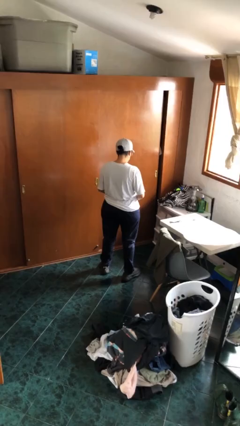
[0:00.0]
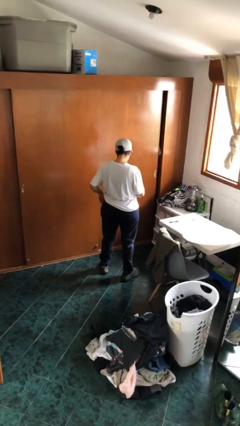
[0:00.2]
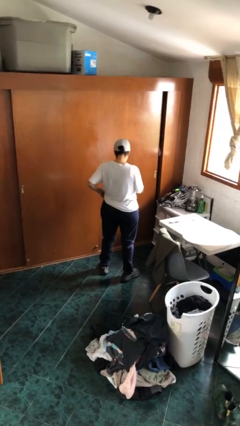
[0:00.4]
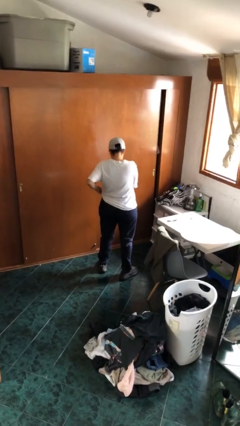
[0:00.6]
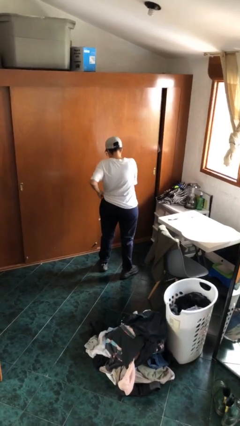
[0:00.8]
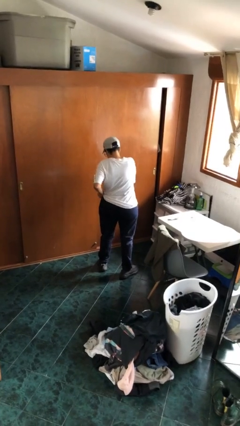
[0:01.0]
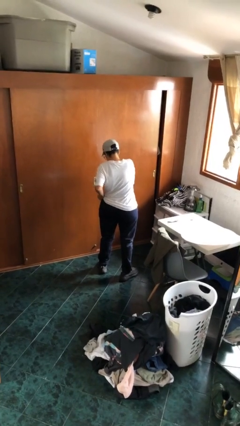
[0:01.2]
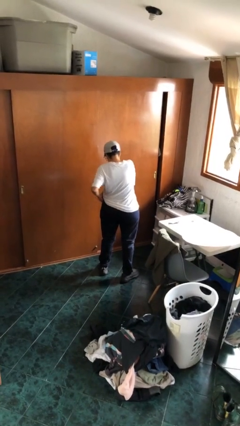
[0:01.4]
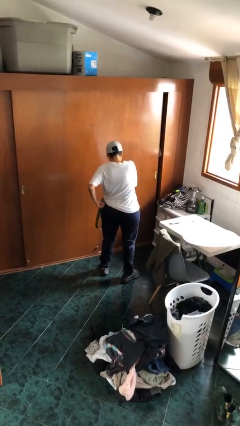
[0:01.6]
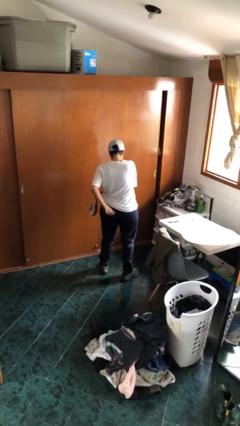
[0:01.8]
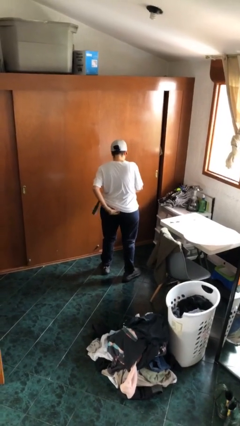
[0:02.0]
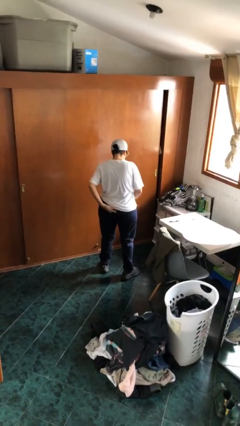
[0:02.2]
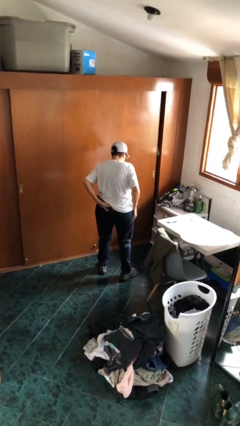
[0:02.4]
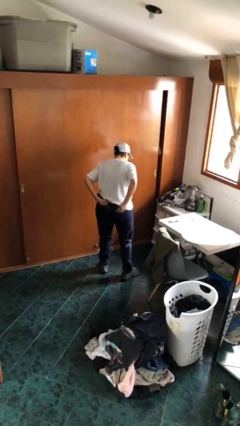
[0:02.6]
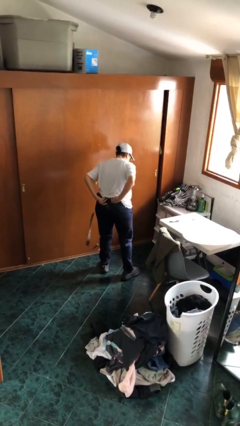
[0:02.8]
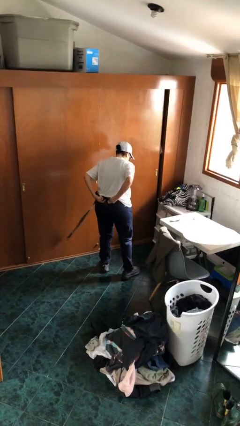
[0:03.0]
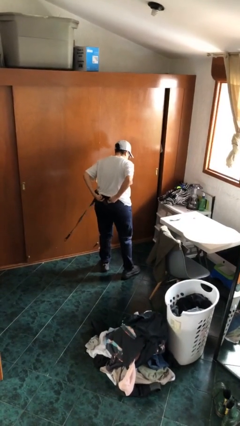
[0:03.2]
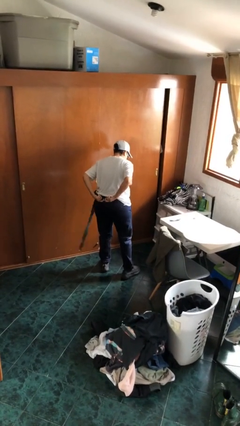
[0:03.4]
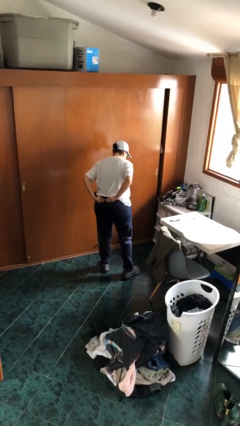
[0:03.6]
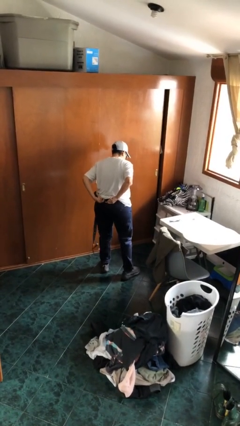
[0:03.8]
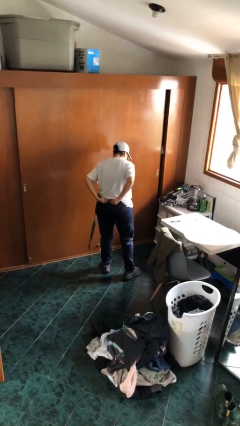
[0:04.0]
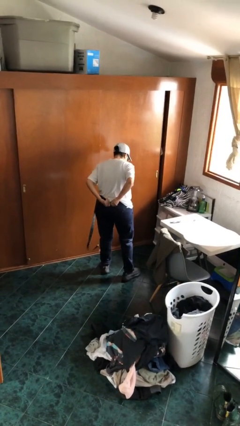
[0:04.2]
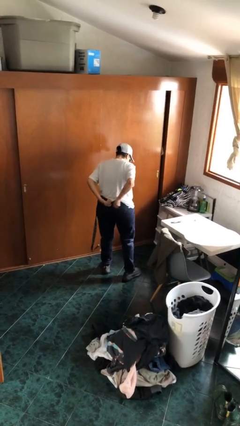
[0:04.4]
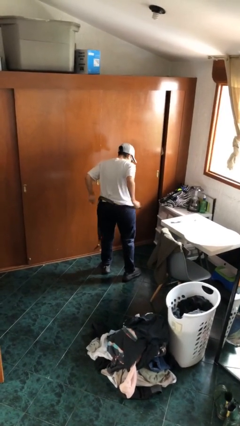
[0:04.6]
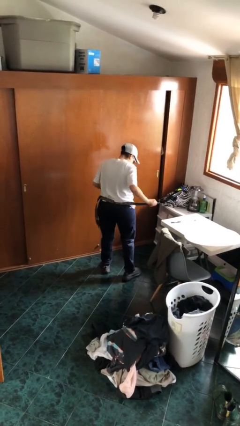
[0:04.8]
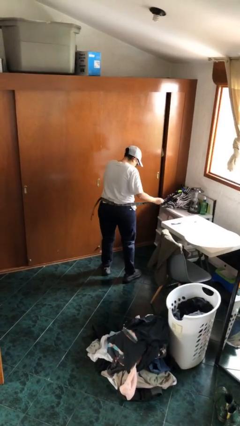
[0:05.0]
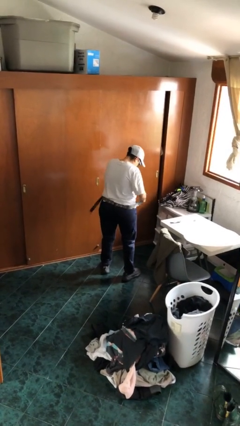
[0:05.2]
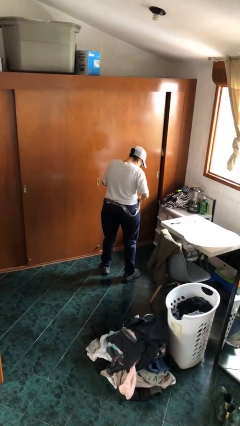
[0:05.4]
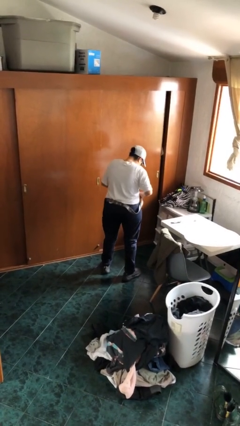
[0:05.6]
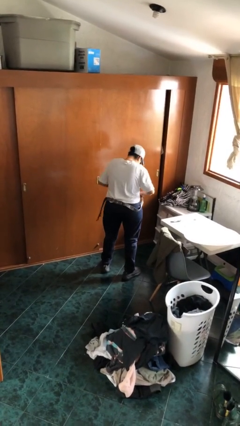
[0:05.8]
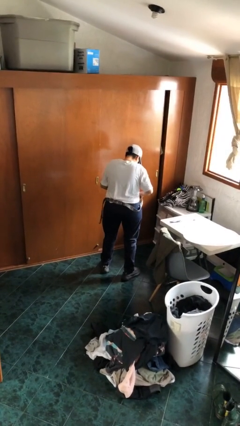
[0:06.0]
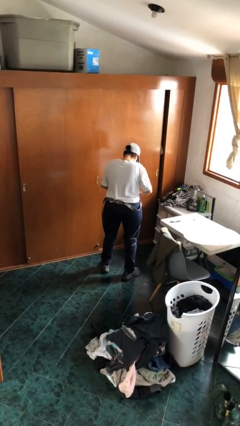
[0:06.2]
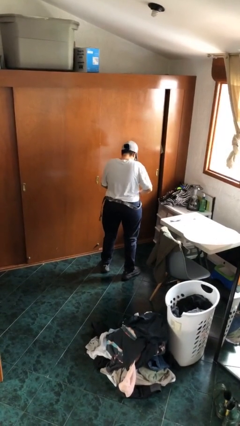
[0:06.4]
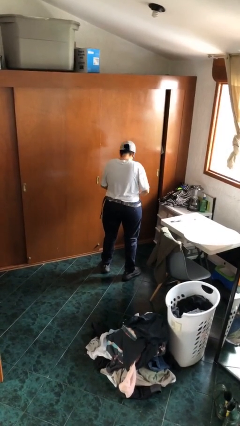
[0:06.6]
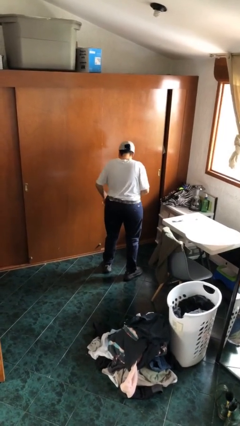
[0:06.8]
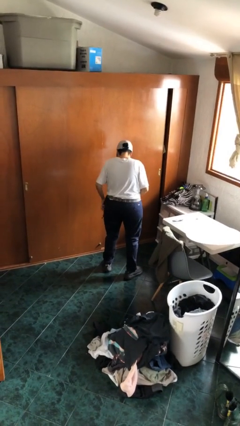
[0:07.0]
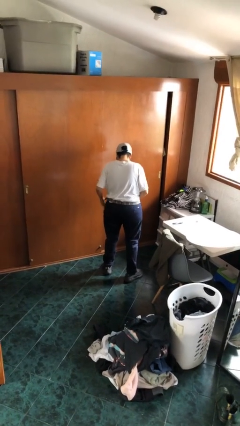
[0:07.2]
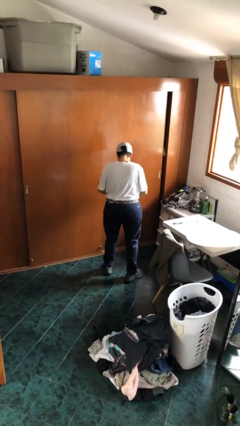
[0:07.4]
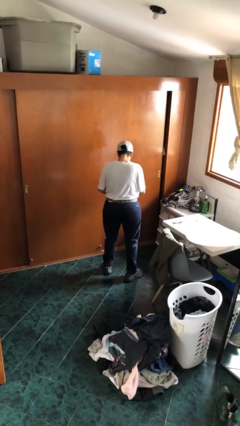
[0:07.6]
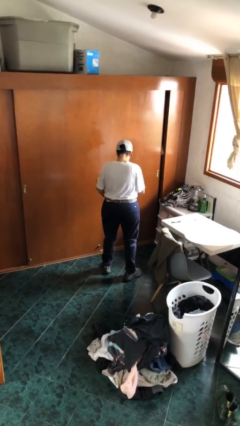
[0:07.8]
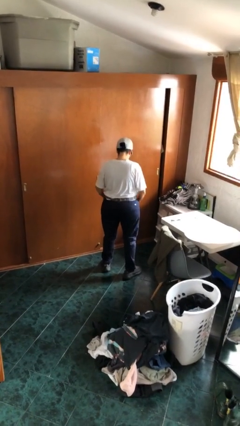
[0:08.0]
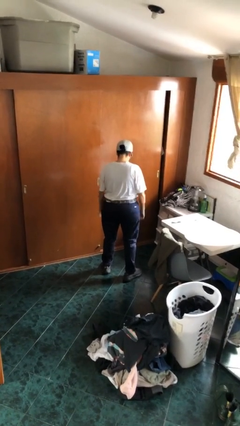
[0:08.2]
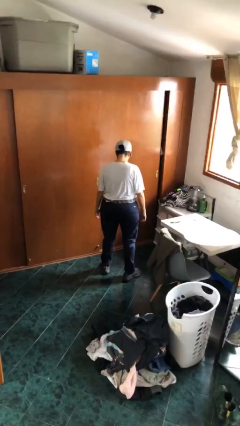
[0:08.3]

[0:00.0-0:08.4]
person puts on belt

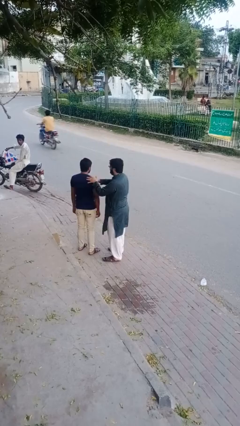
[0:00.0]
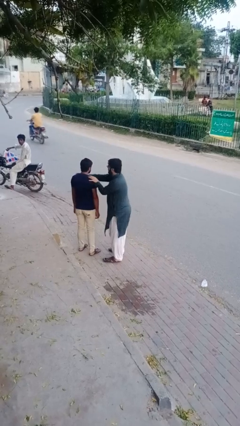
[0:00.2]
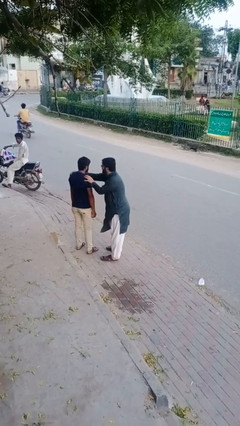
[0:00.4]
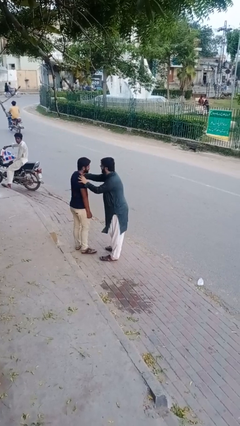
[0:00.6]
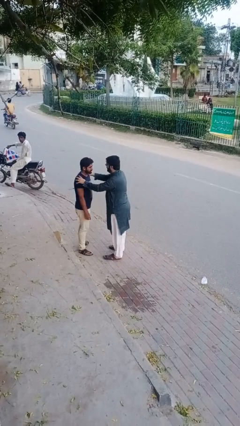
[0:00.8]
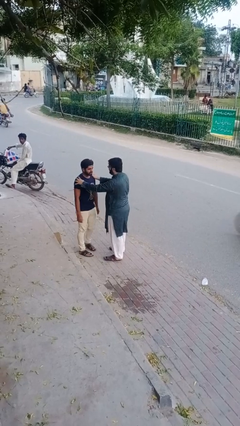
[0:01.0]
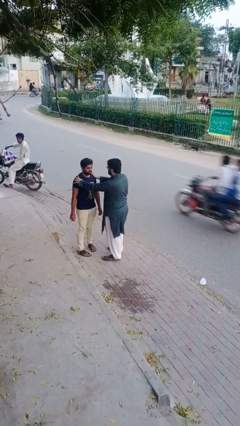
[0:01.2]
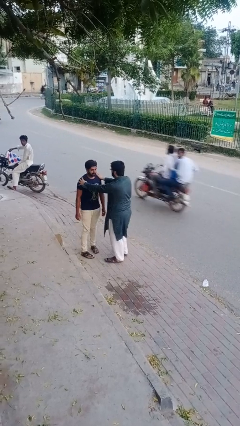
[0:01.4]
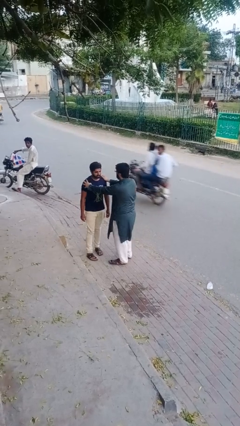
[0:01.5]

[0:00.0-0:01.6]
person spins person around

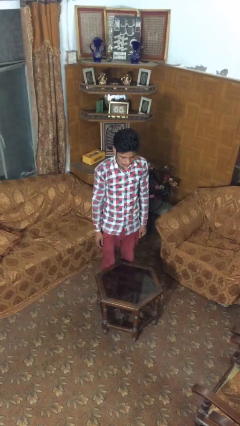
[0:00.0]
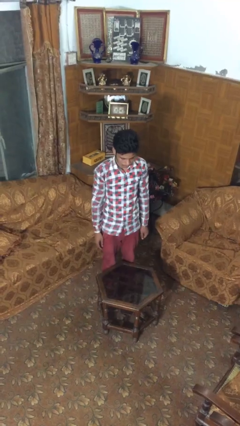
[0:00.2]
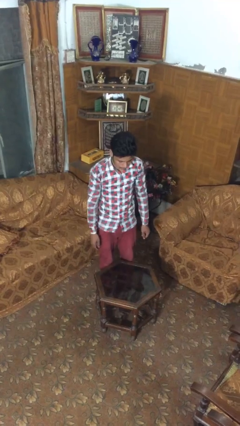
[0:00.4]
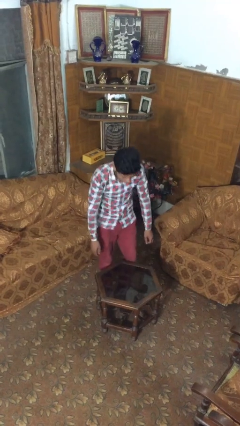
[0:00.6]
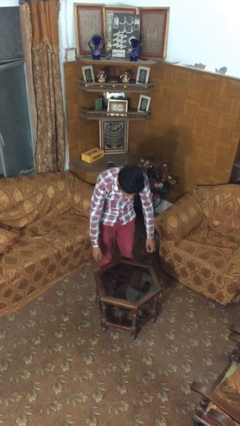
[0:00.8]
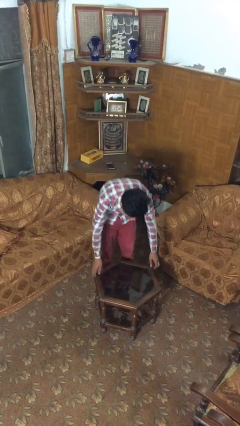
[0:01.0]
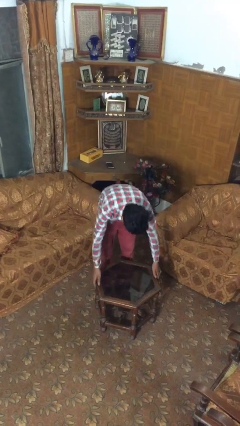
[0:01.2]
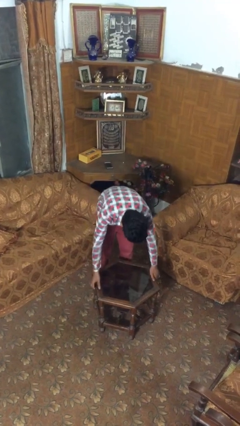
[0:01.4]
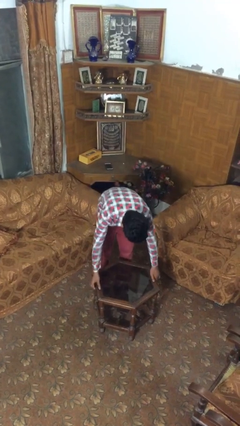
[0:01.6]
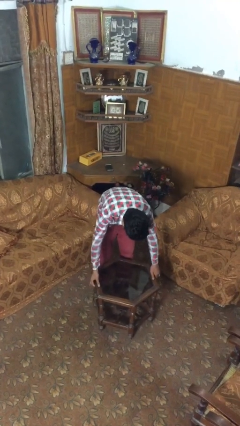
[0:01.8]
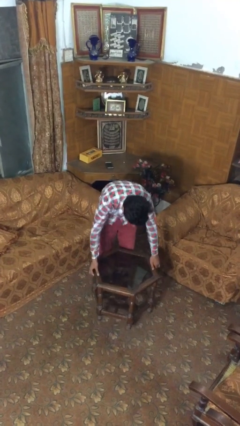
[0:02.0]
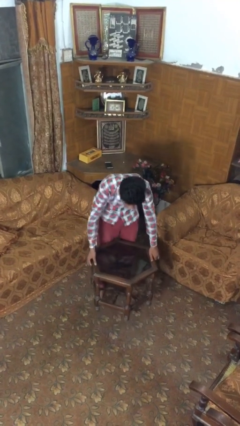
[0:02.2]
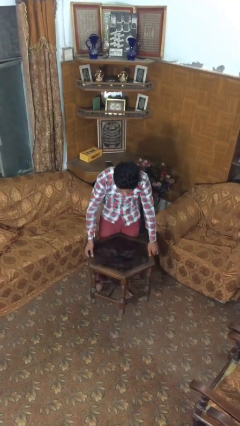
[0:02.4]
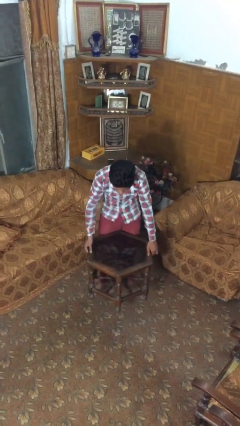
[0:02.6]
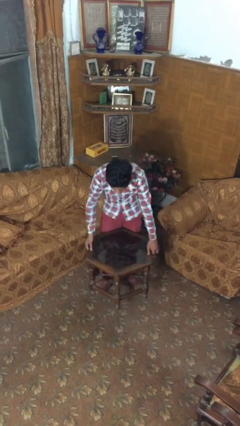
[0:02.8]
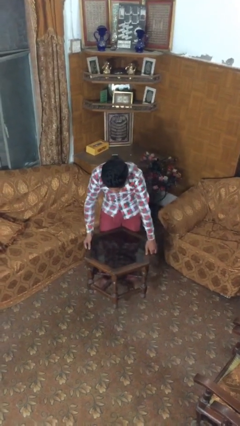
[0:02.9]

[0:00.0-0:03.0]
person picks up object from floor

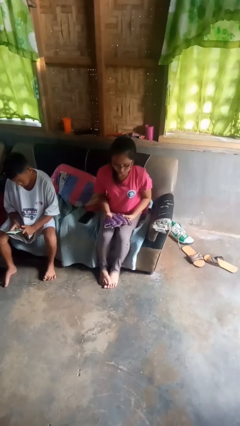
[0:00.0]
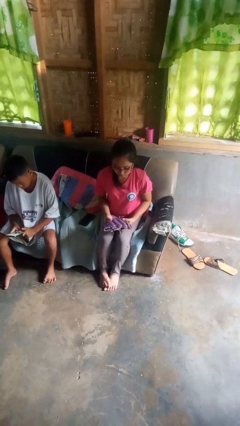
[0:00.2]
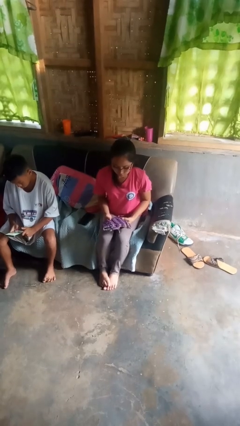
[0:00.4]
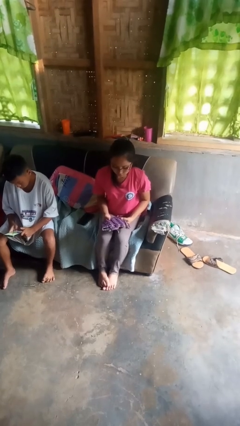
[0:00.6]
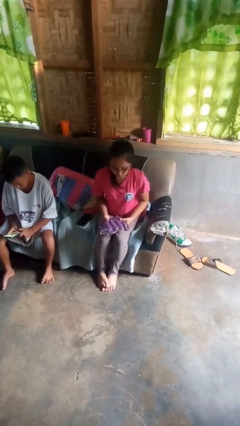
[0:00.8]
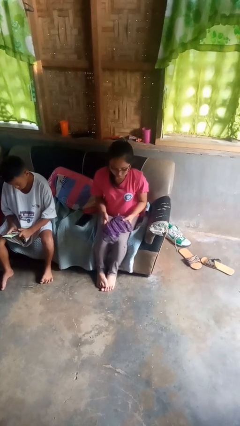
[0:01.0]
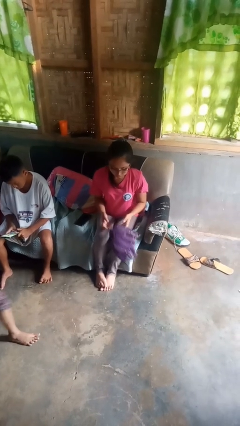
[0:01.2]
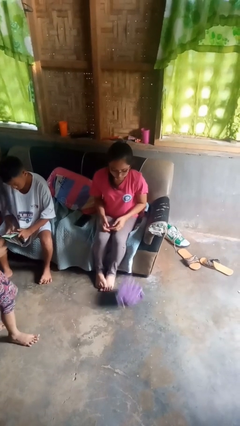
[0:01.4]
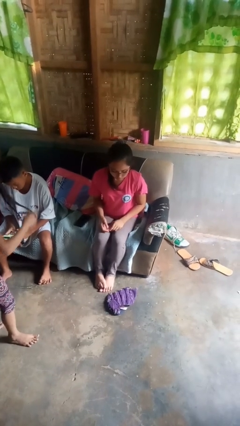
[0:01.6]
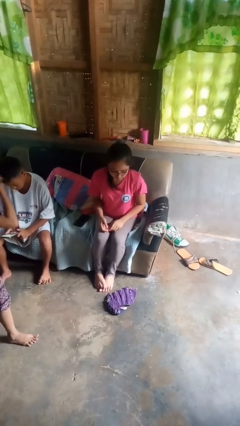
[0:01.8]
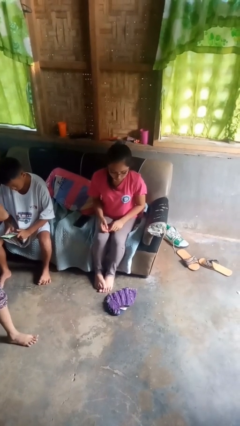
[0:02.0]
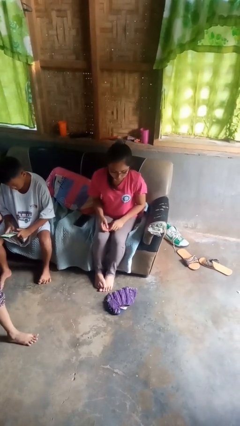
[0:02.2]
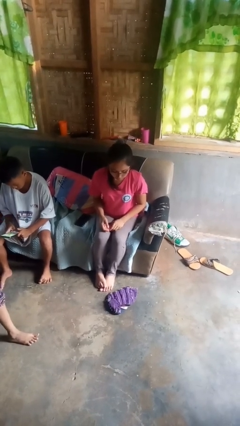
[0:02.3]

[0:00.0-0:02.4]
person drops object

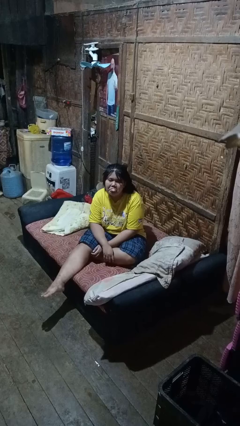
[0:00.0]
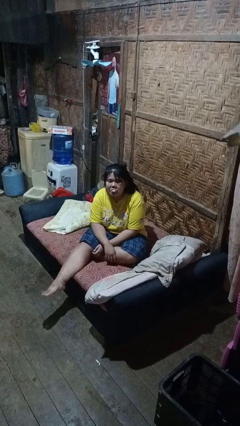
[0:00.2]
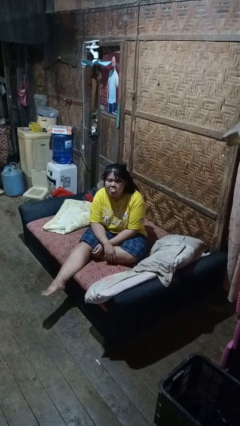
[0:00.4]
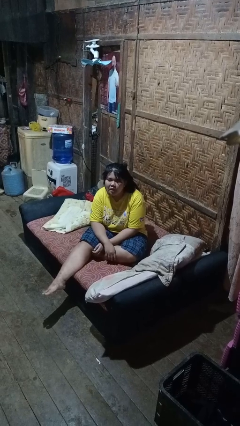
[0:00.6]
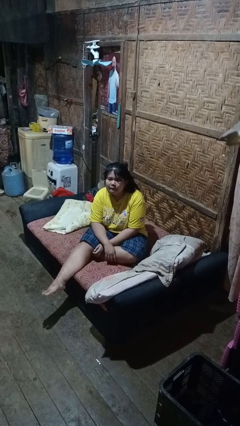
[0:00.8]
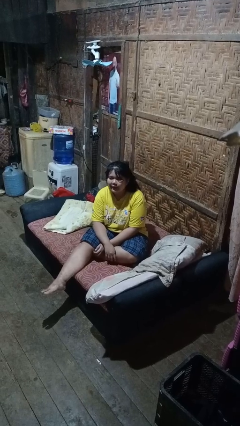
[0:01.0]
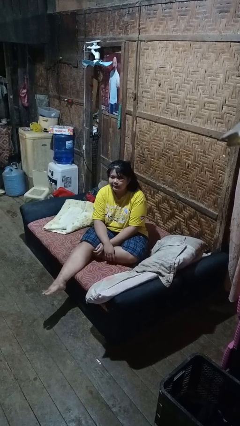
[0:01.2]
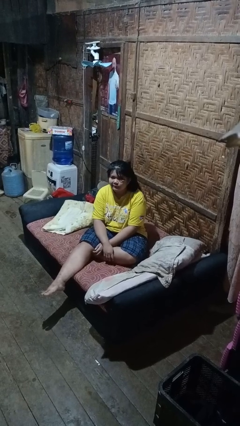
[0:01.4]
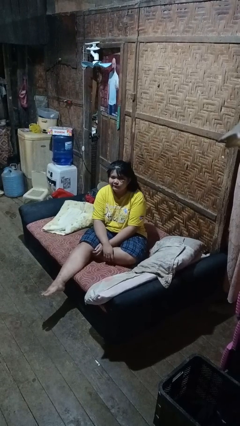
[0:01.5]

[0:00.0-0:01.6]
person sticks out tongue

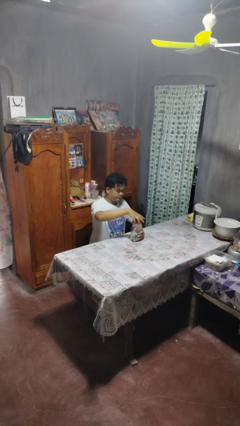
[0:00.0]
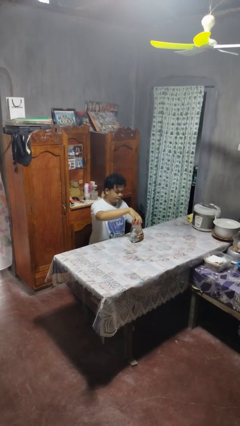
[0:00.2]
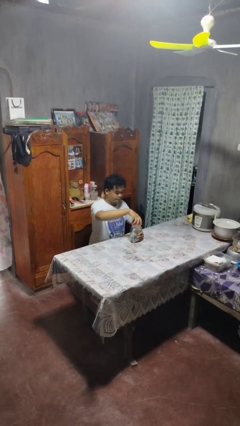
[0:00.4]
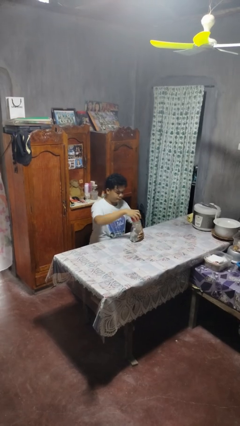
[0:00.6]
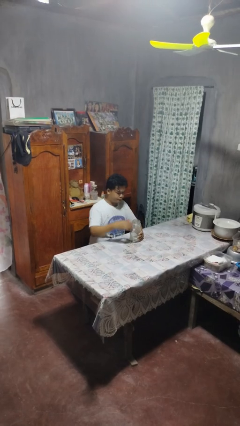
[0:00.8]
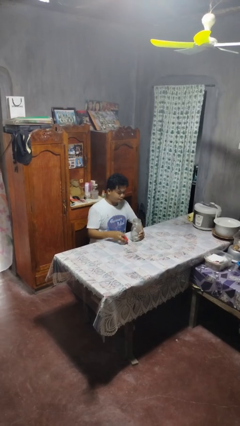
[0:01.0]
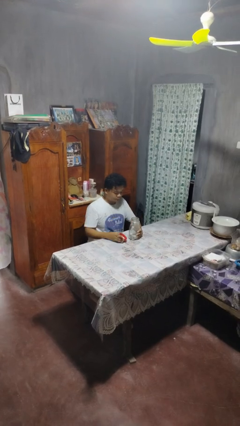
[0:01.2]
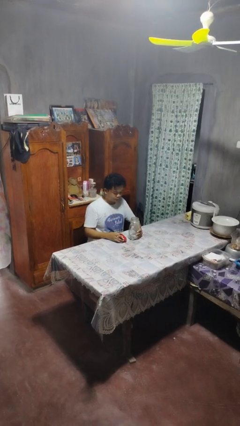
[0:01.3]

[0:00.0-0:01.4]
person opens jar
